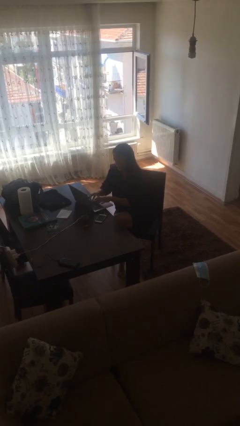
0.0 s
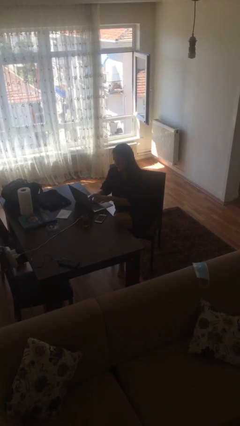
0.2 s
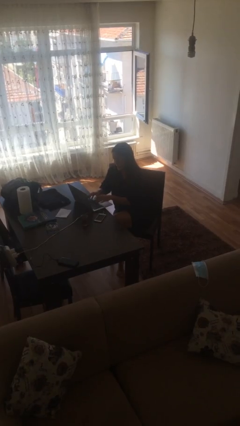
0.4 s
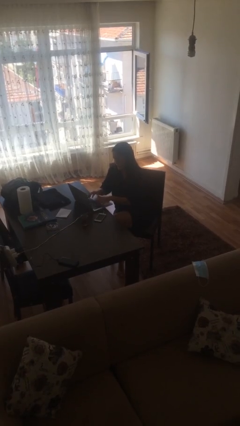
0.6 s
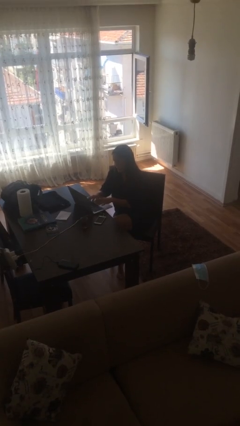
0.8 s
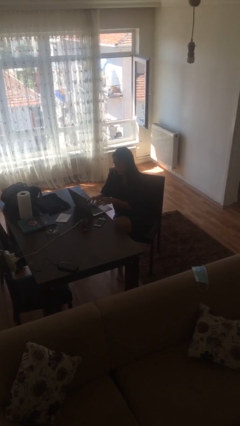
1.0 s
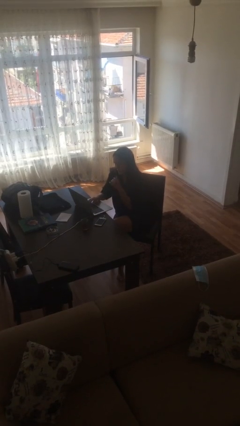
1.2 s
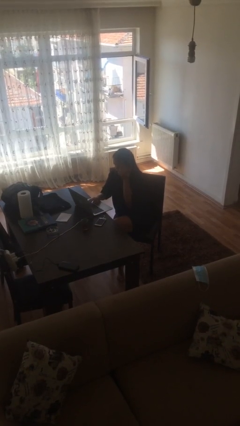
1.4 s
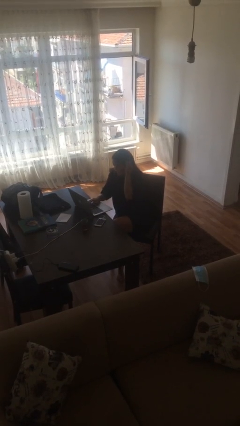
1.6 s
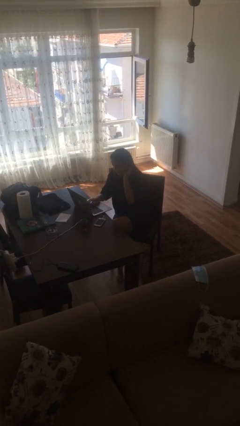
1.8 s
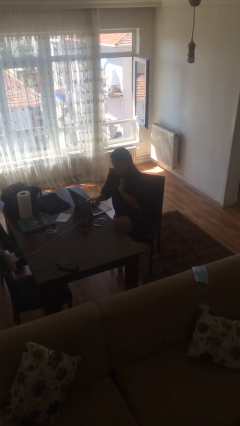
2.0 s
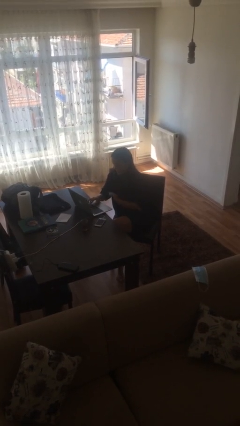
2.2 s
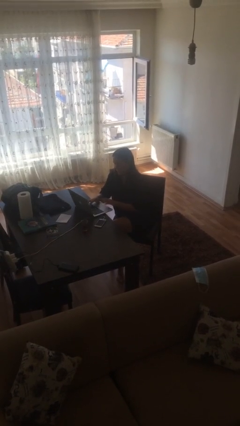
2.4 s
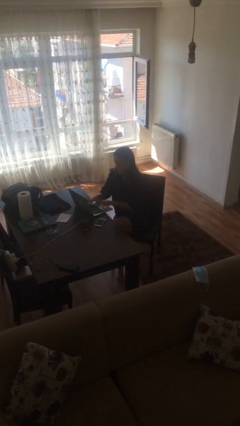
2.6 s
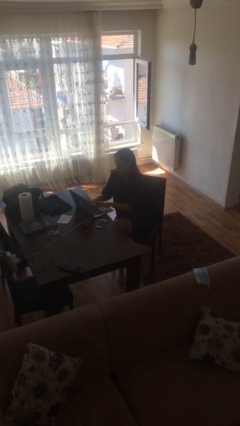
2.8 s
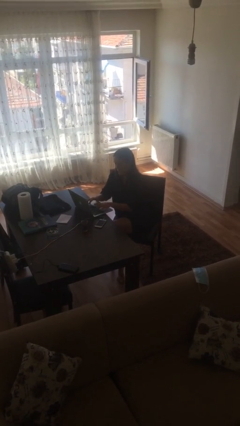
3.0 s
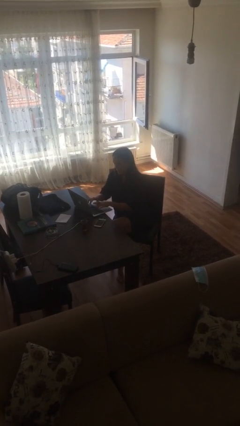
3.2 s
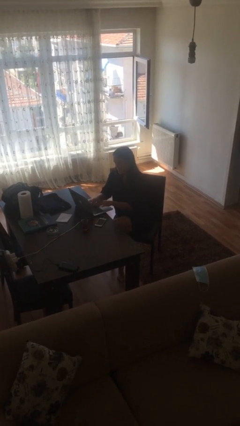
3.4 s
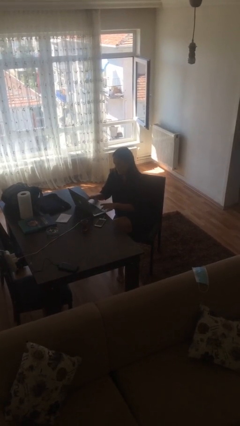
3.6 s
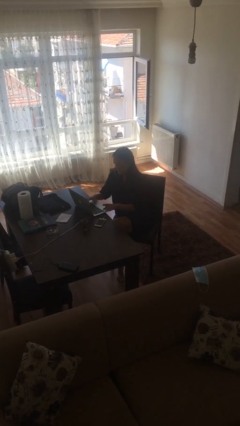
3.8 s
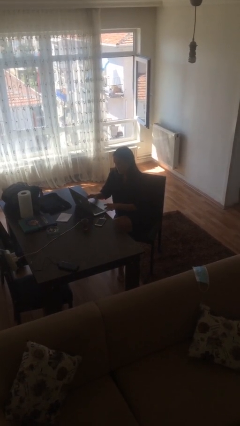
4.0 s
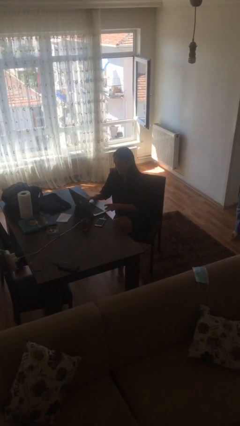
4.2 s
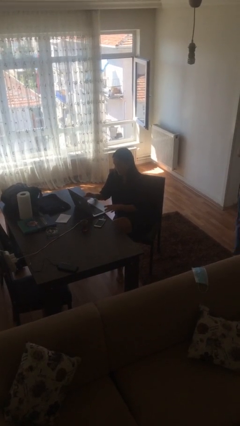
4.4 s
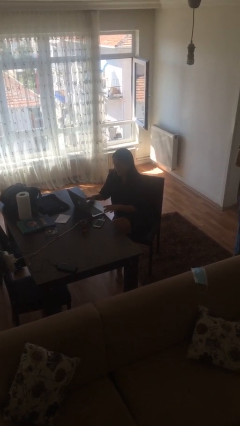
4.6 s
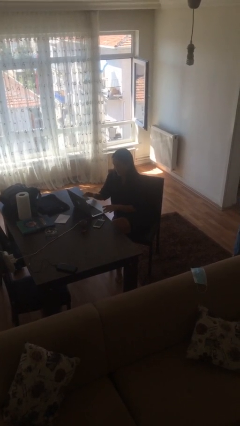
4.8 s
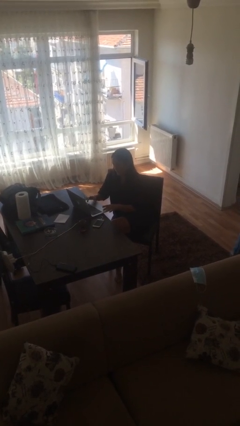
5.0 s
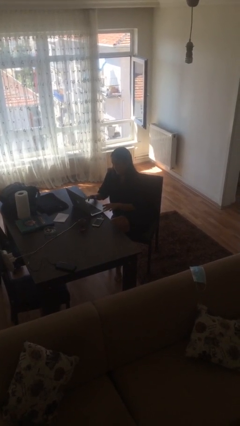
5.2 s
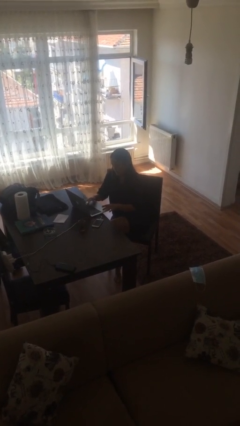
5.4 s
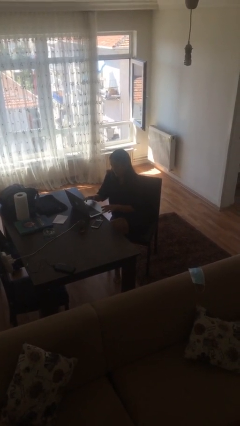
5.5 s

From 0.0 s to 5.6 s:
person interacts with laptop

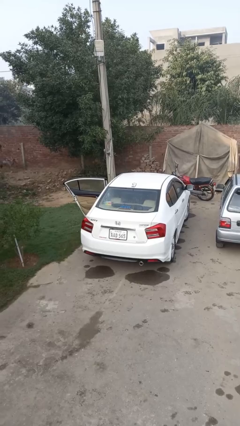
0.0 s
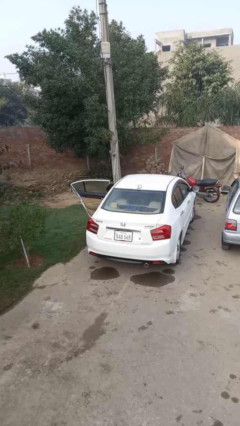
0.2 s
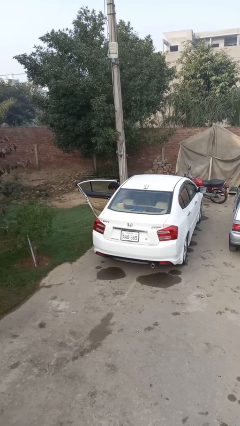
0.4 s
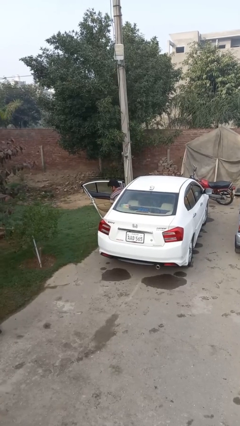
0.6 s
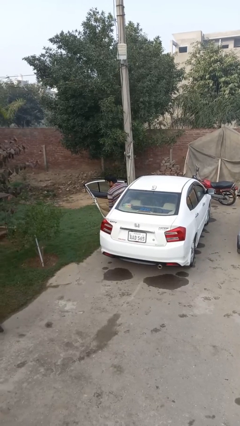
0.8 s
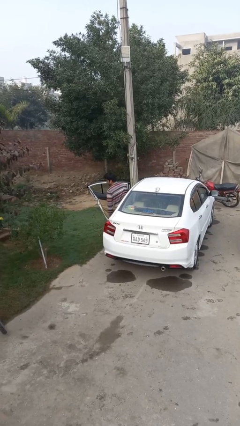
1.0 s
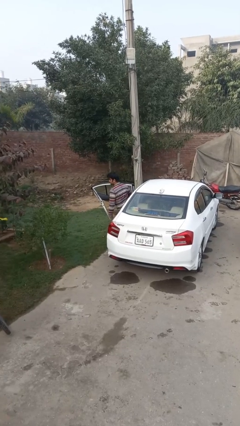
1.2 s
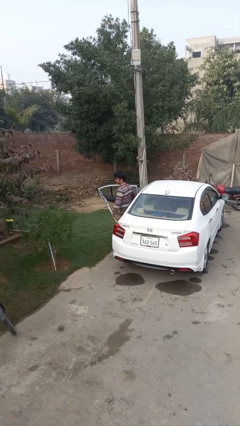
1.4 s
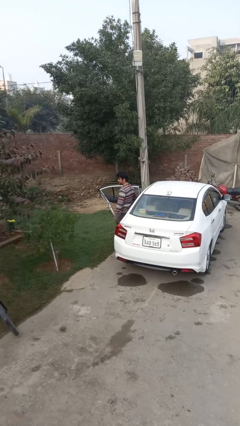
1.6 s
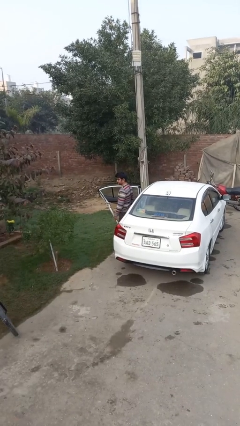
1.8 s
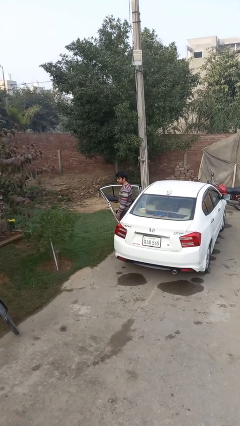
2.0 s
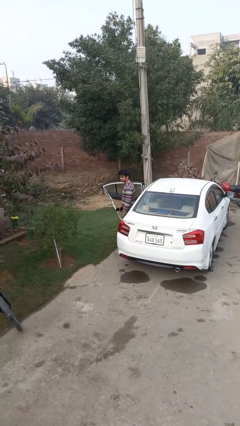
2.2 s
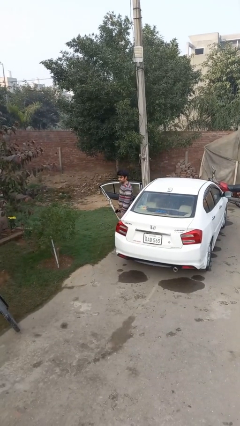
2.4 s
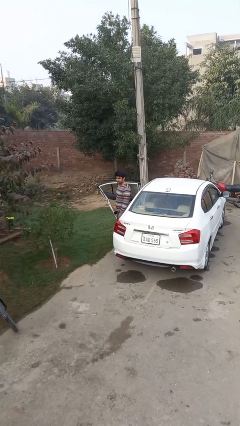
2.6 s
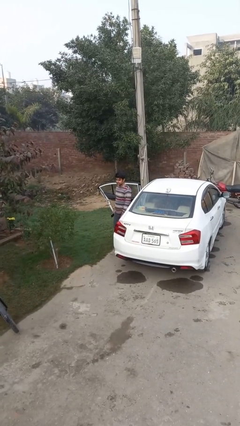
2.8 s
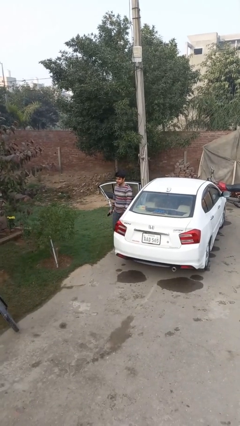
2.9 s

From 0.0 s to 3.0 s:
person exits car

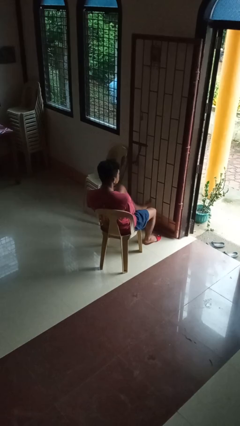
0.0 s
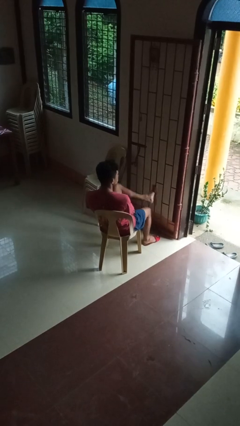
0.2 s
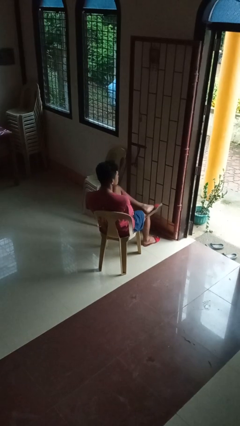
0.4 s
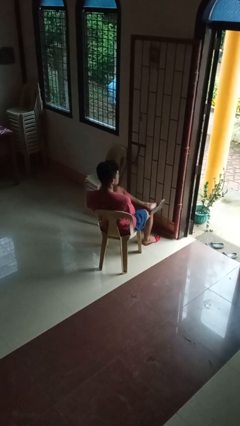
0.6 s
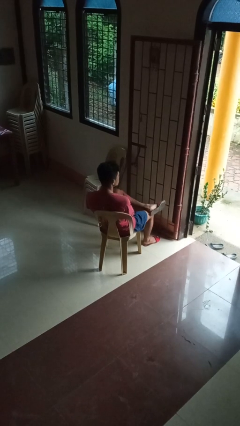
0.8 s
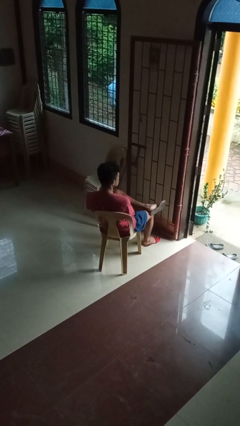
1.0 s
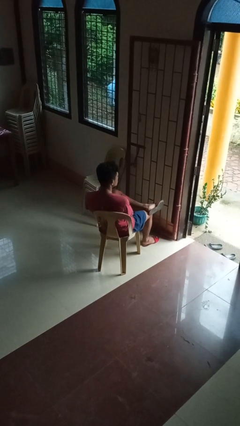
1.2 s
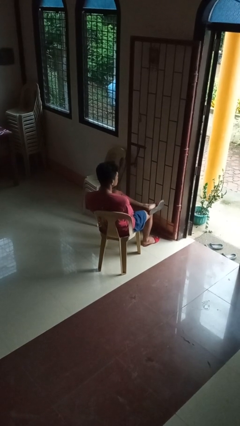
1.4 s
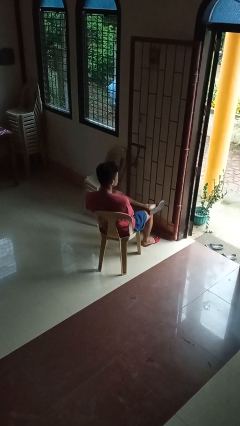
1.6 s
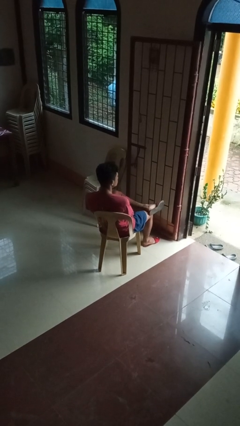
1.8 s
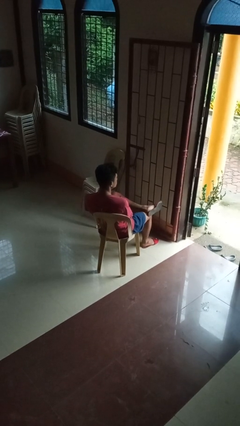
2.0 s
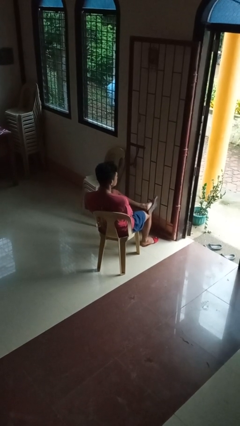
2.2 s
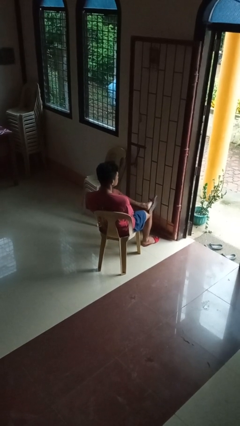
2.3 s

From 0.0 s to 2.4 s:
person crosses legs

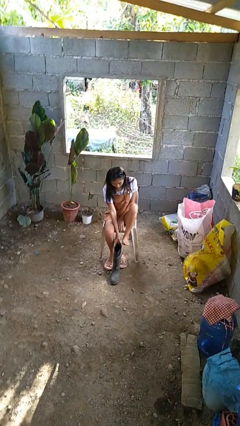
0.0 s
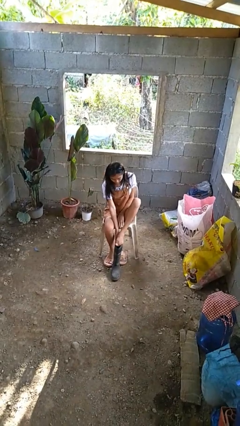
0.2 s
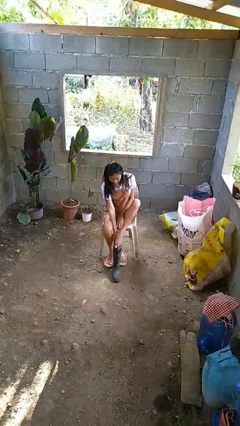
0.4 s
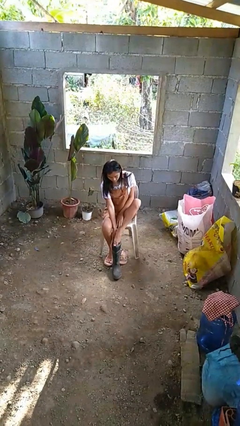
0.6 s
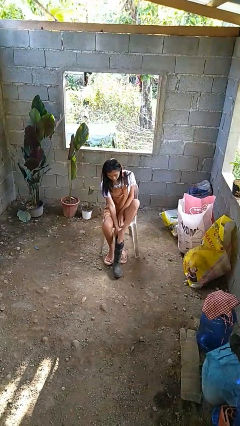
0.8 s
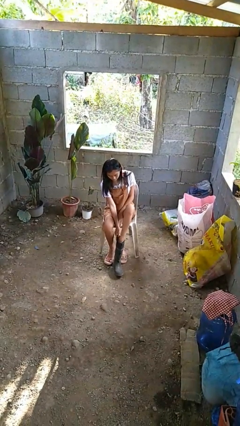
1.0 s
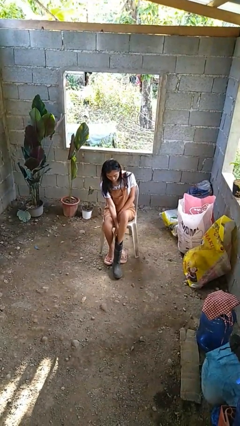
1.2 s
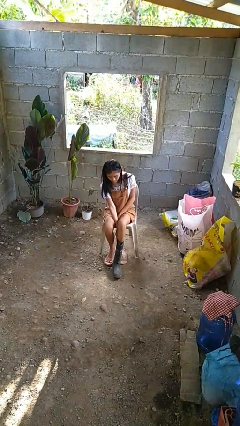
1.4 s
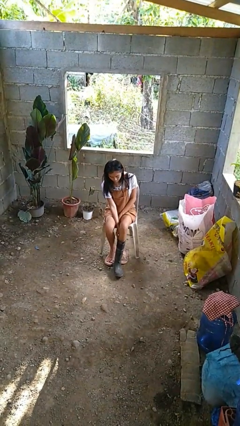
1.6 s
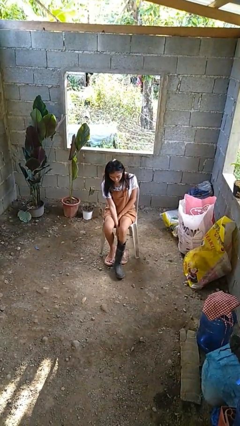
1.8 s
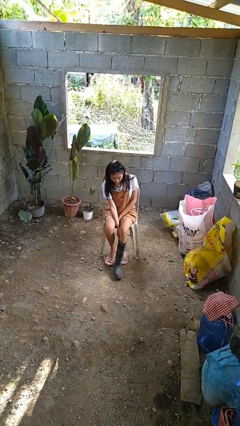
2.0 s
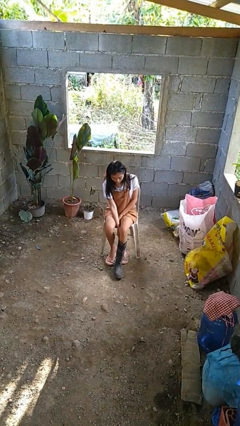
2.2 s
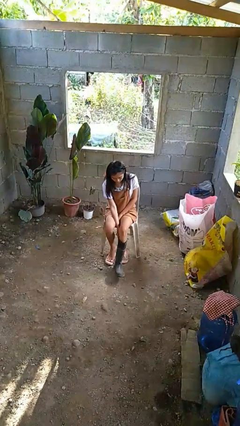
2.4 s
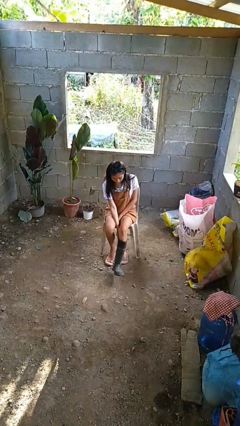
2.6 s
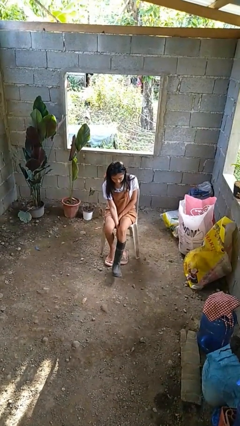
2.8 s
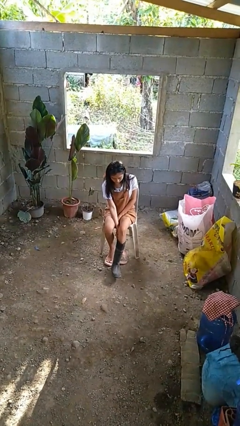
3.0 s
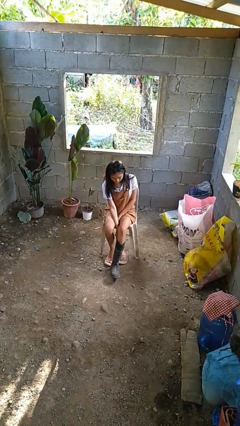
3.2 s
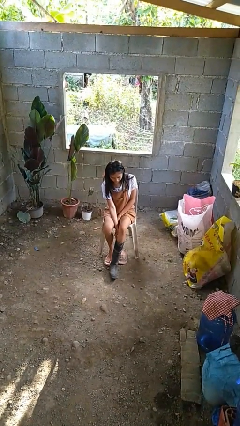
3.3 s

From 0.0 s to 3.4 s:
person puts on boots

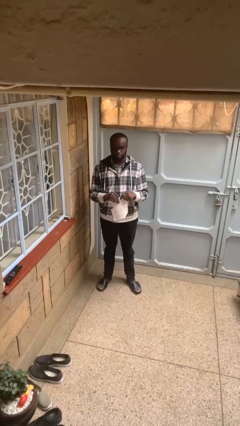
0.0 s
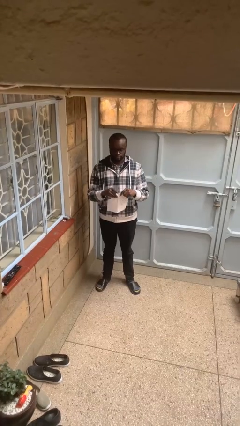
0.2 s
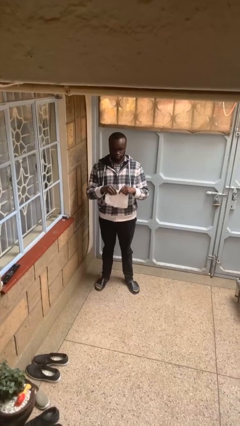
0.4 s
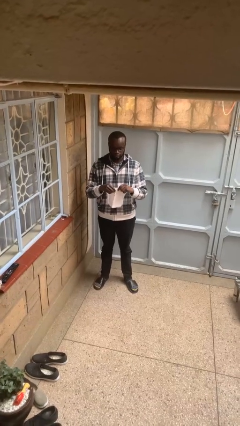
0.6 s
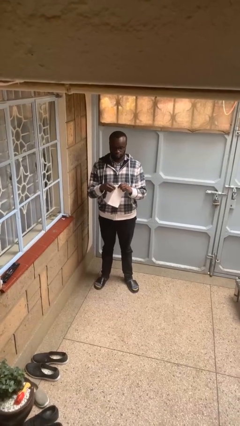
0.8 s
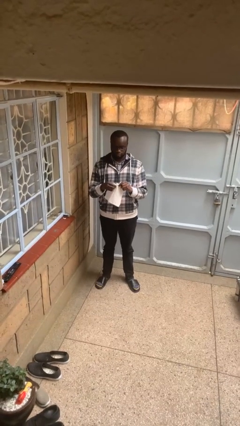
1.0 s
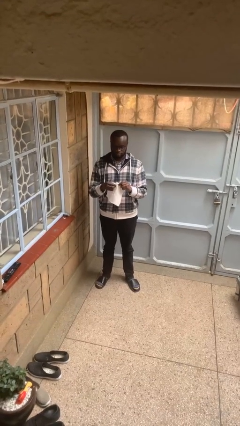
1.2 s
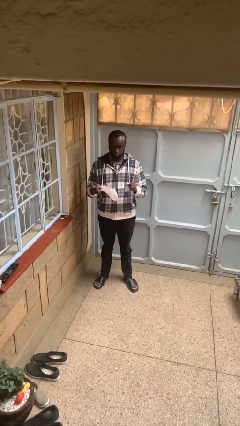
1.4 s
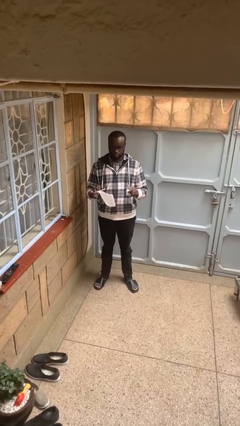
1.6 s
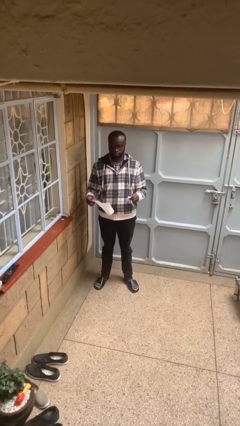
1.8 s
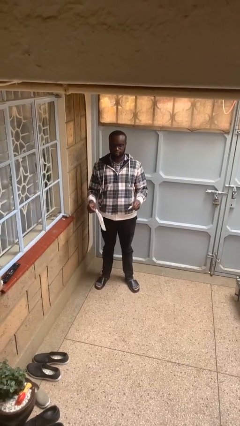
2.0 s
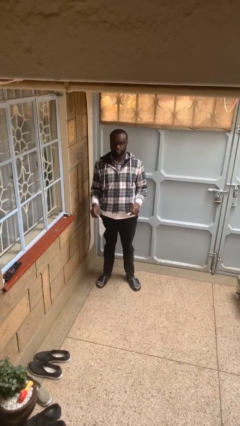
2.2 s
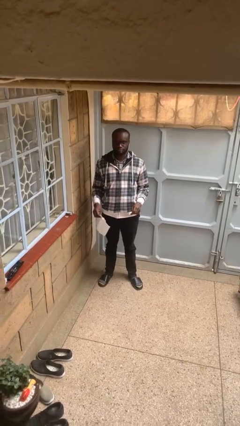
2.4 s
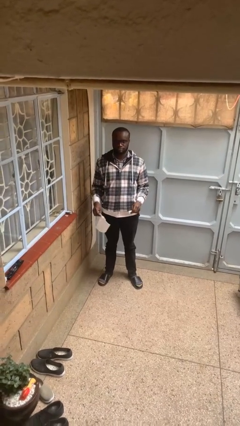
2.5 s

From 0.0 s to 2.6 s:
person tears paper

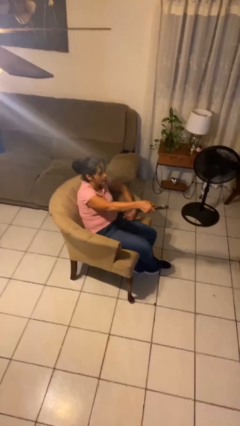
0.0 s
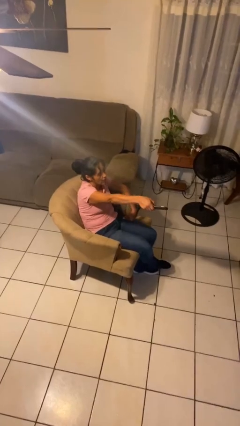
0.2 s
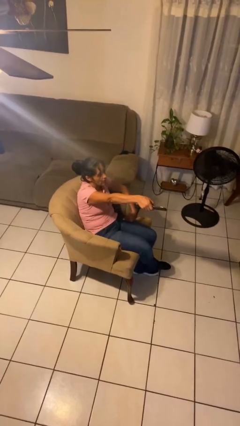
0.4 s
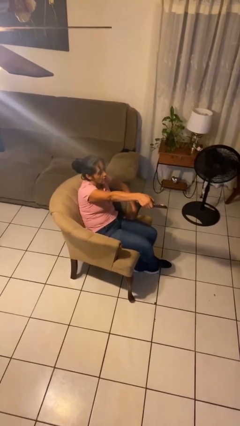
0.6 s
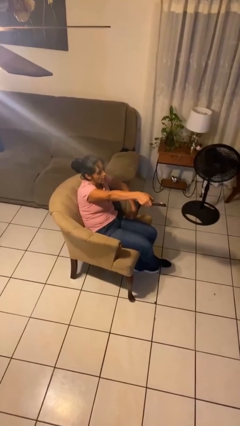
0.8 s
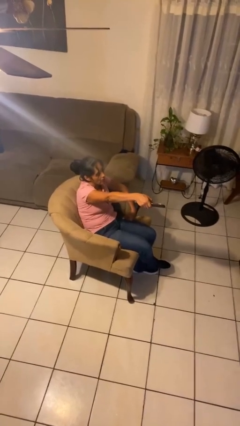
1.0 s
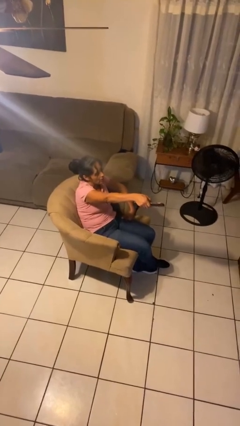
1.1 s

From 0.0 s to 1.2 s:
person uses television remote
